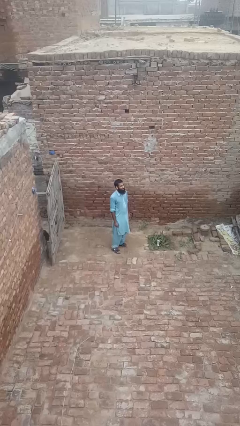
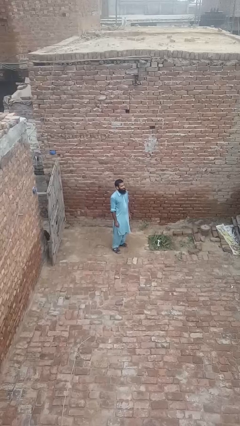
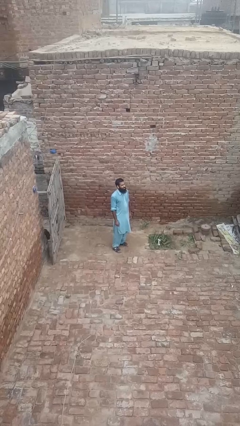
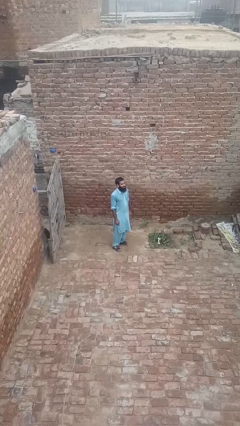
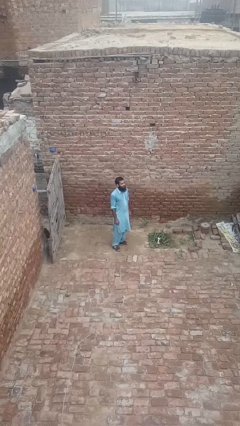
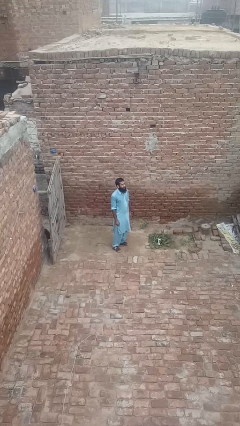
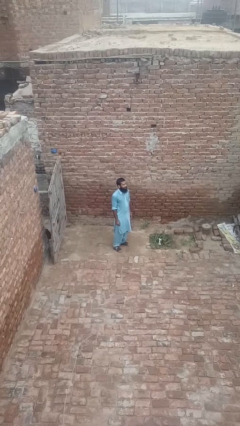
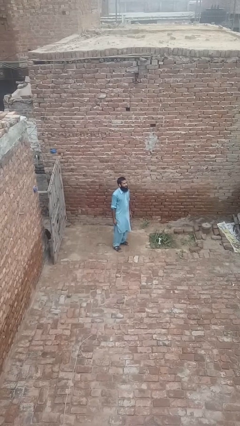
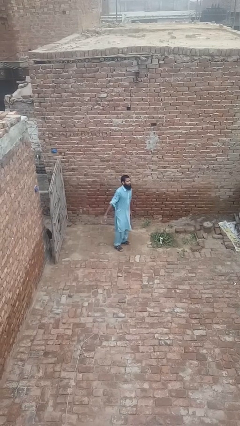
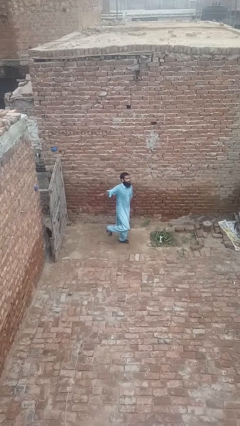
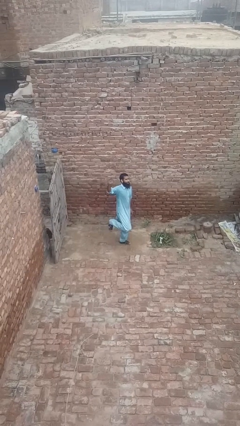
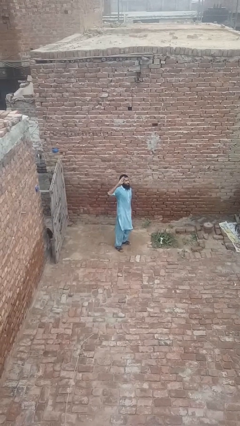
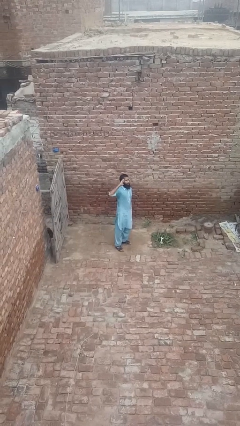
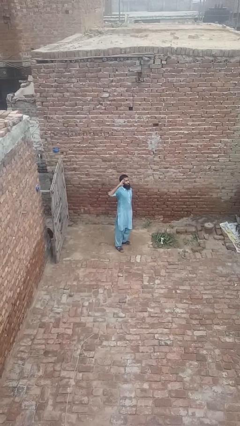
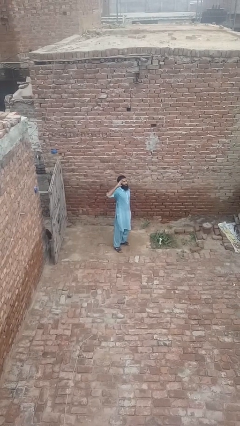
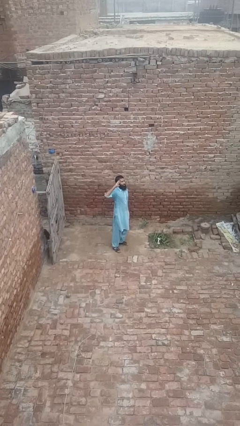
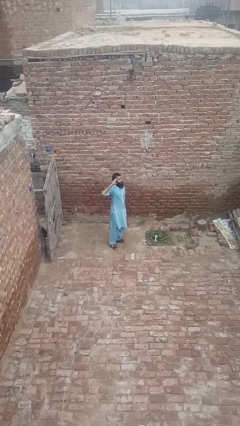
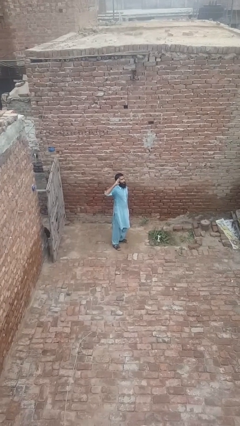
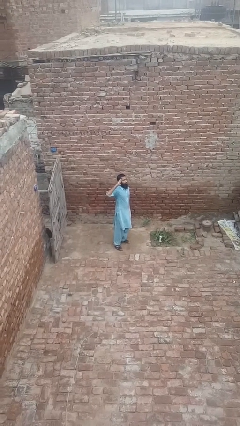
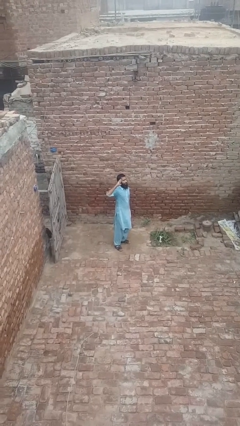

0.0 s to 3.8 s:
person salutes

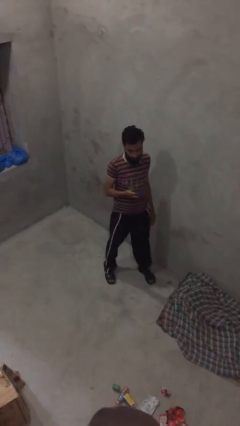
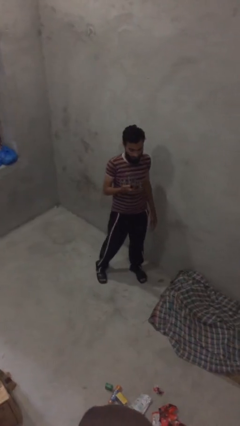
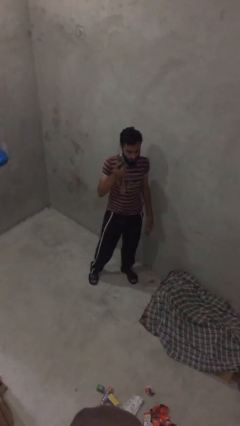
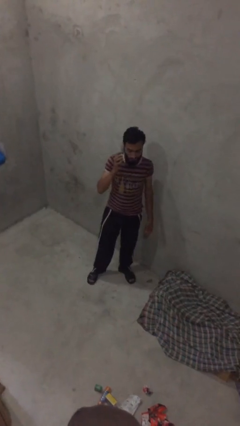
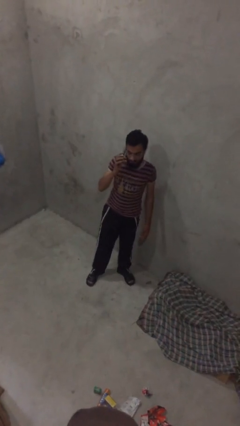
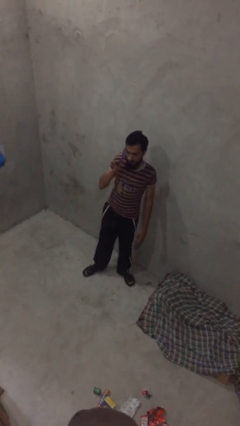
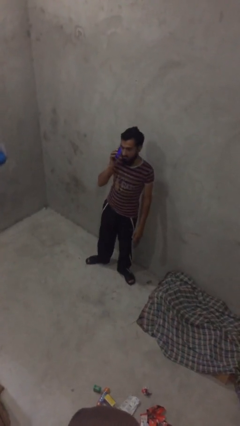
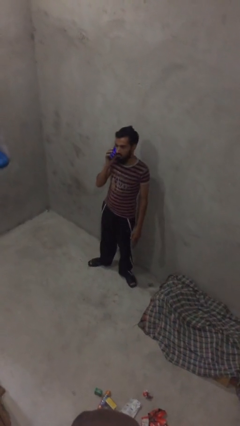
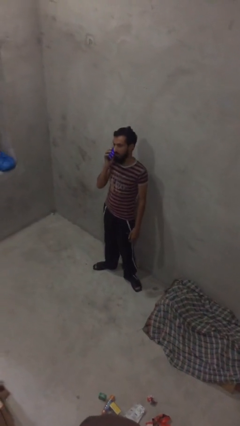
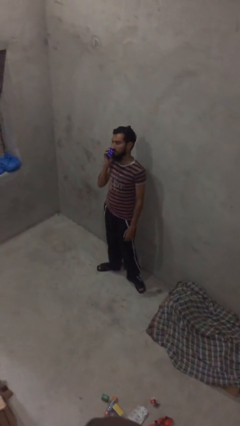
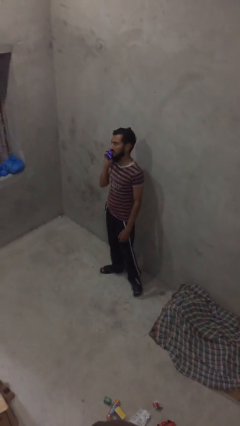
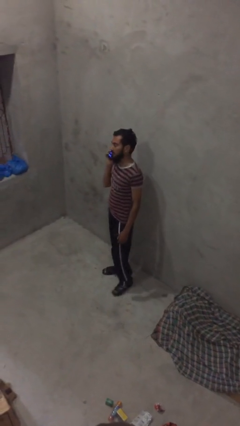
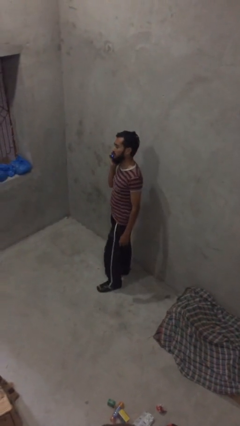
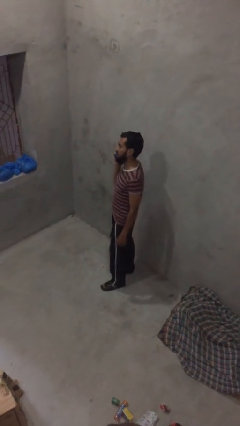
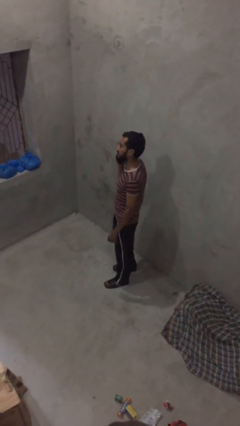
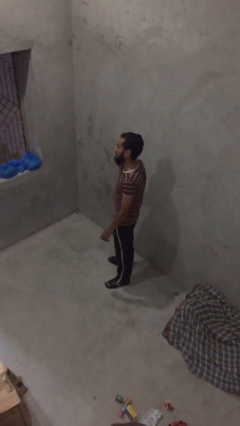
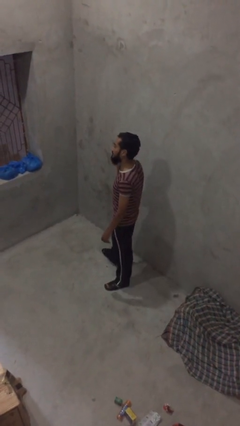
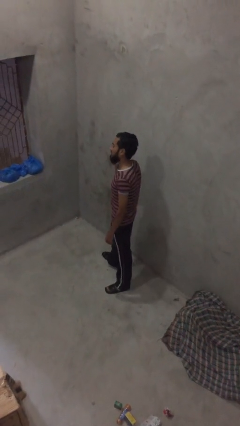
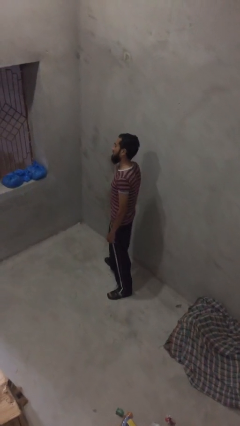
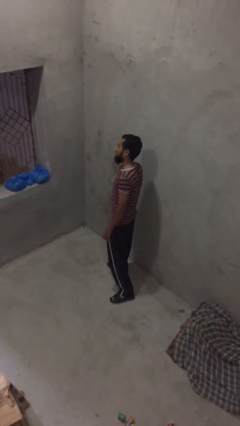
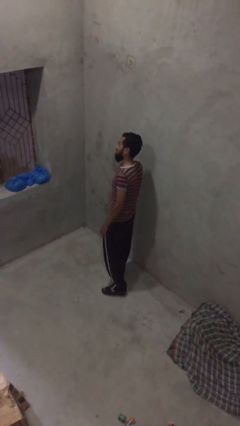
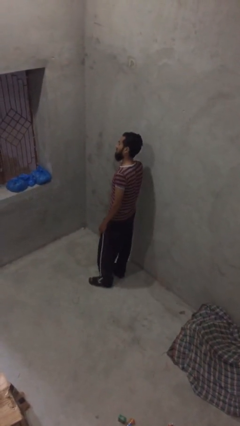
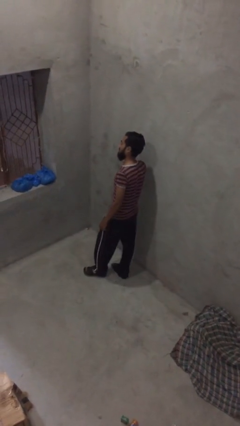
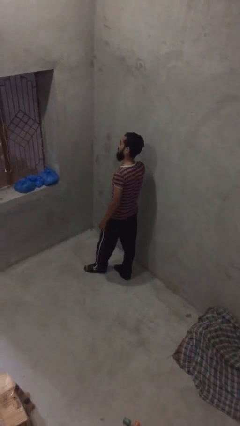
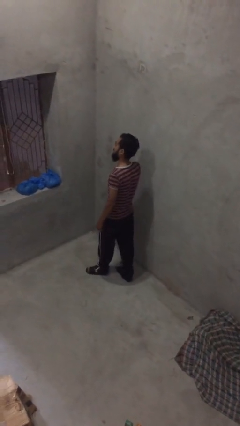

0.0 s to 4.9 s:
person talks on phone

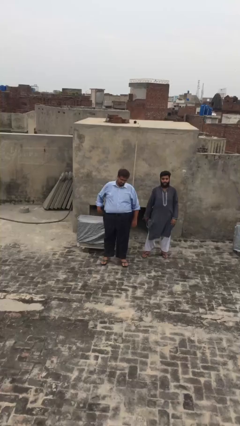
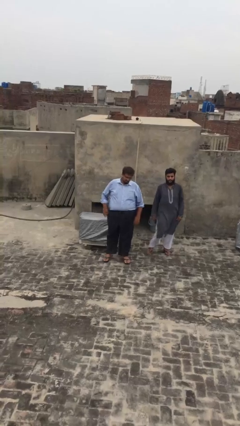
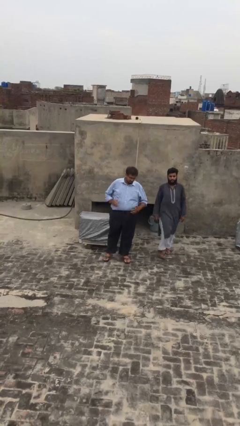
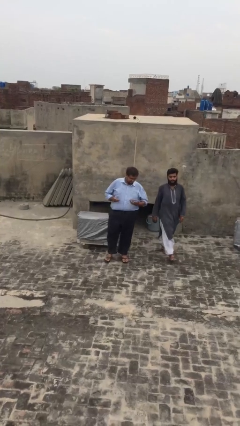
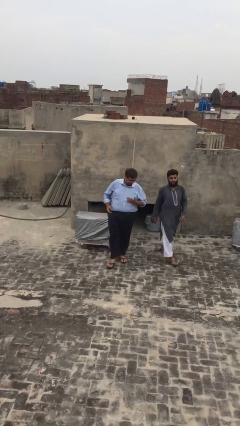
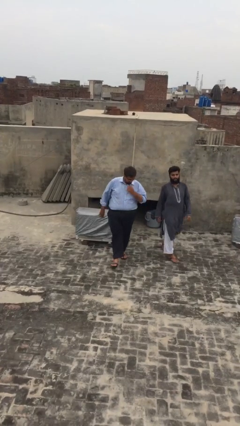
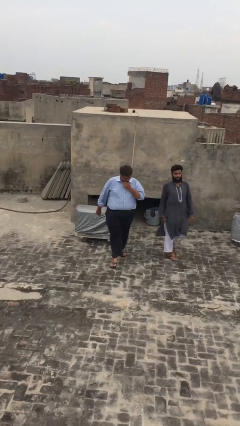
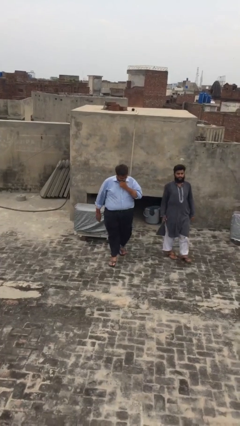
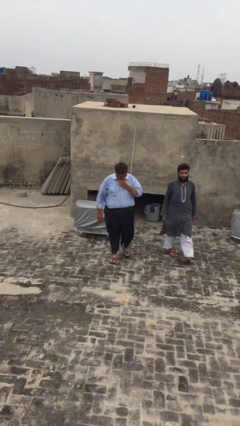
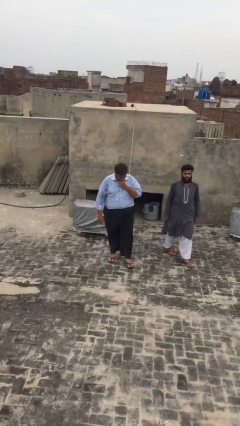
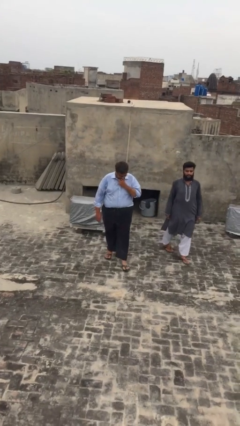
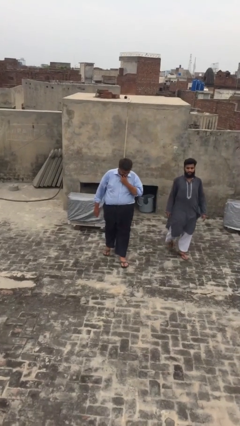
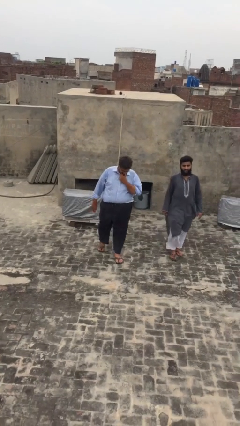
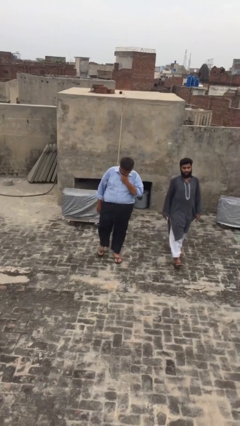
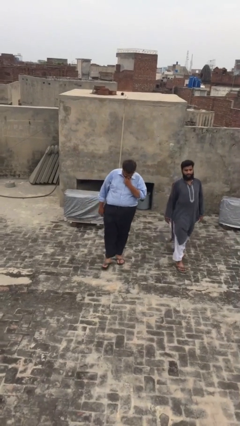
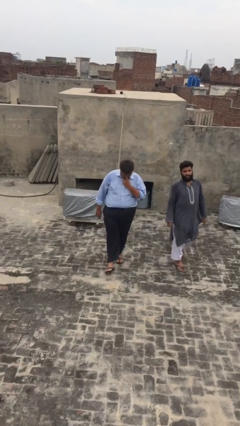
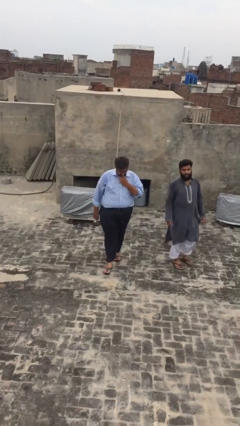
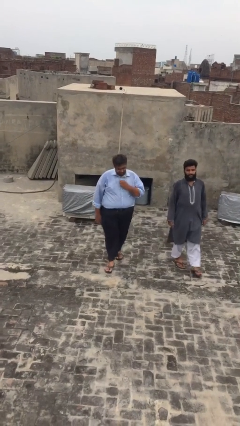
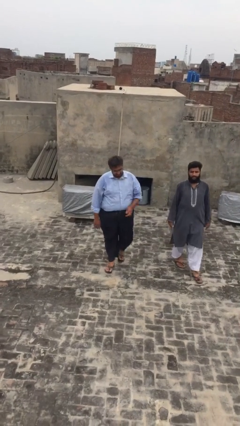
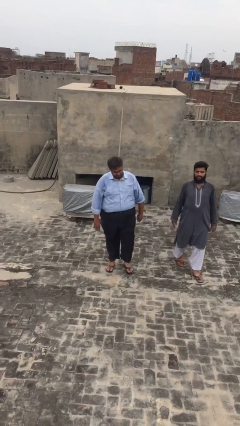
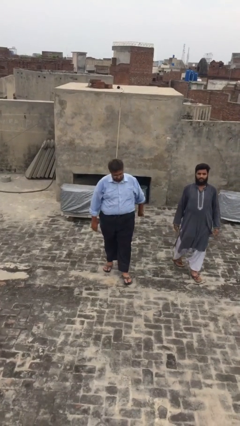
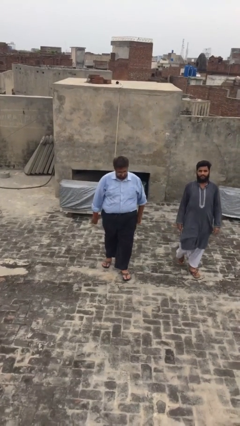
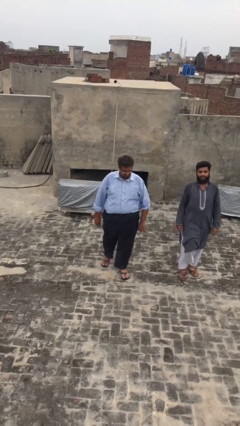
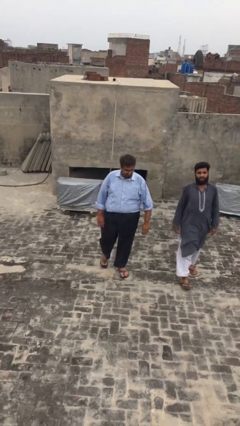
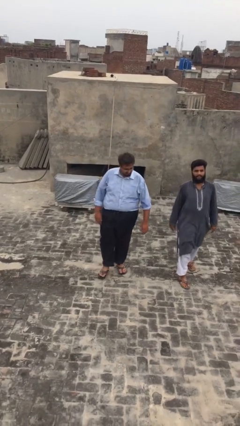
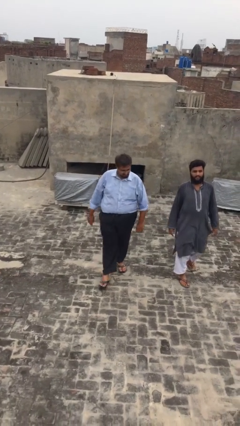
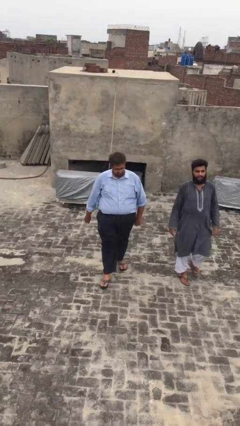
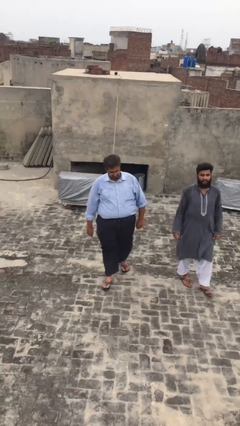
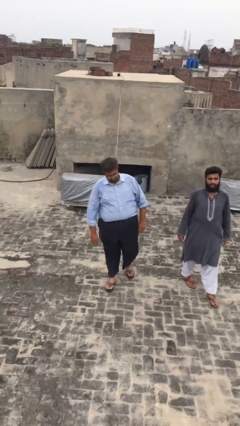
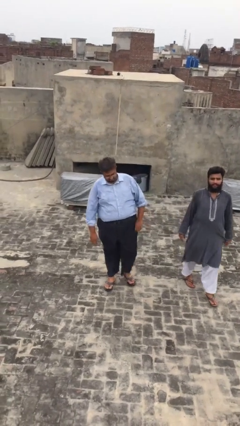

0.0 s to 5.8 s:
person talks to person

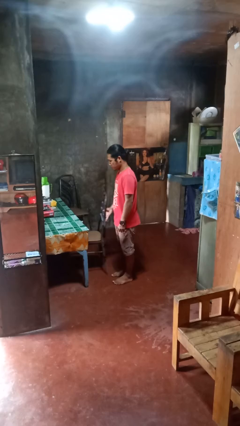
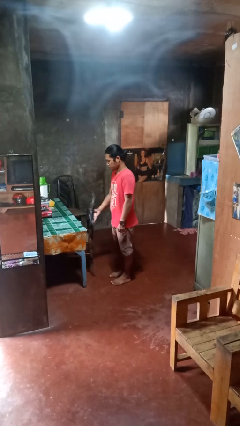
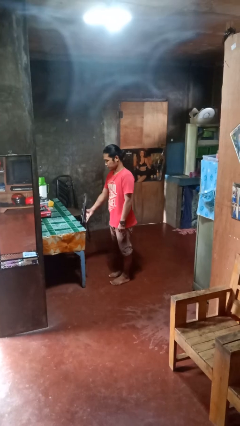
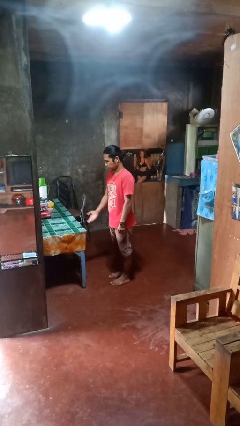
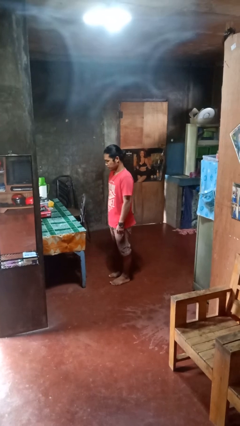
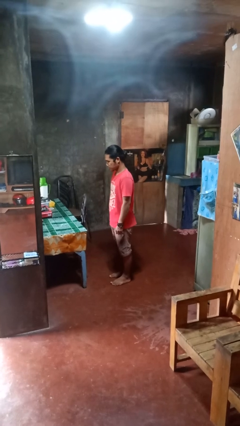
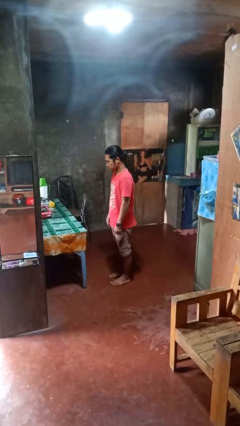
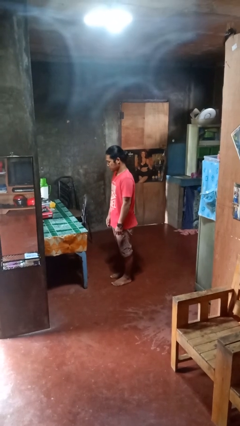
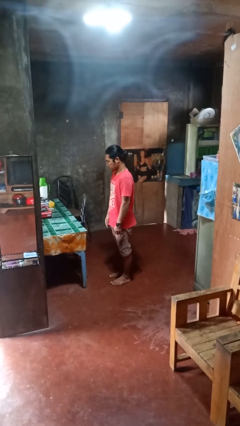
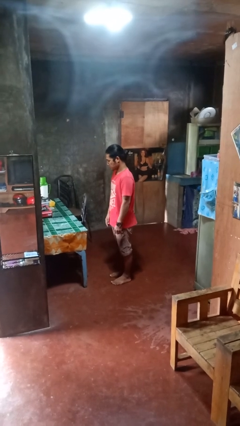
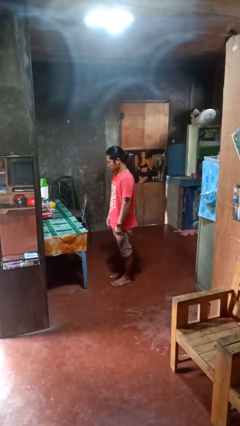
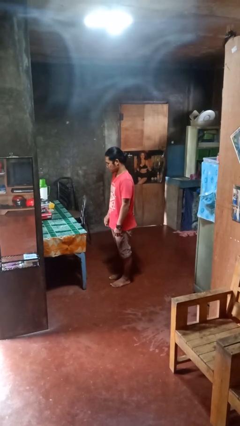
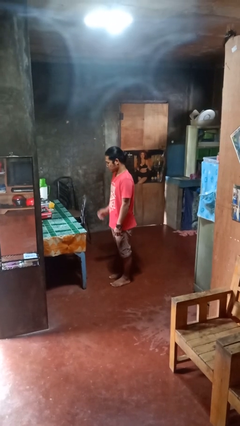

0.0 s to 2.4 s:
person pushes in chair

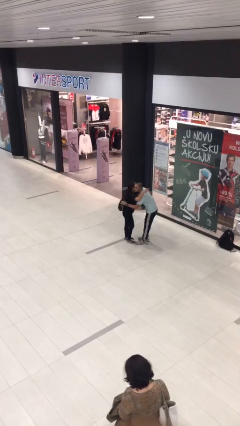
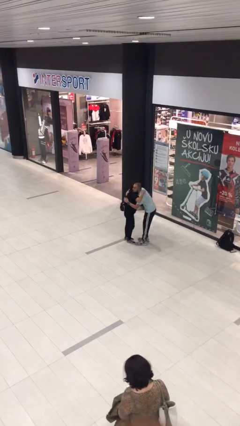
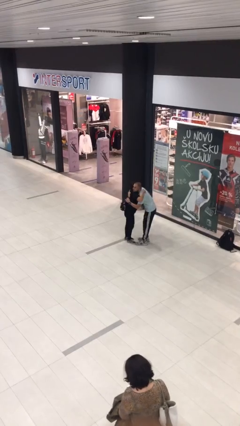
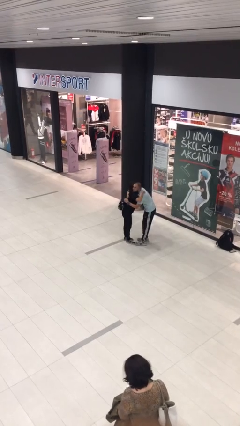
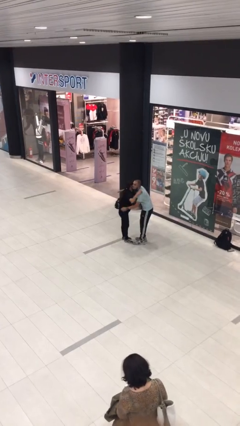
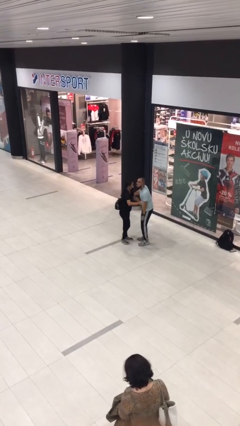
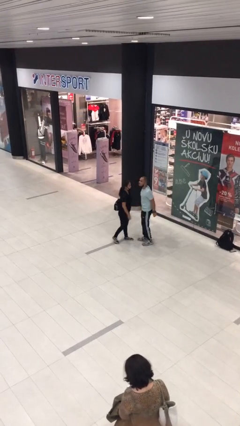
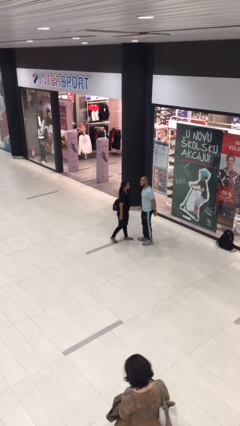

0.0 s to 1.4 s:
person embraces person
